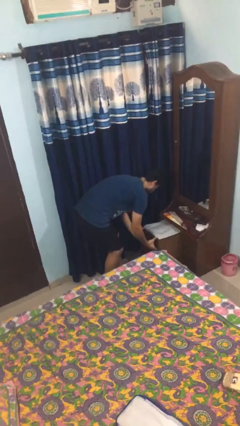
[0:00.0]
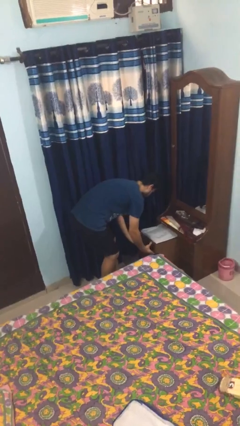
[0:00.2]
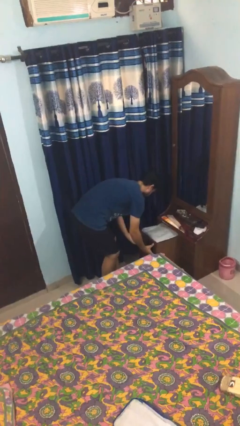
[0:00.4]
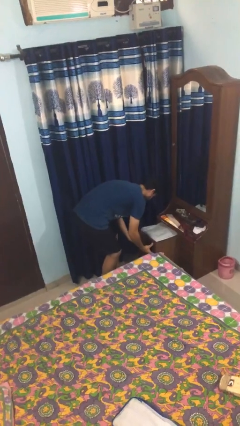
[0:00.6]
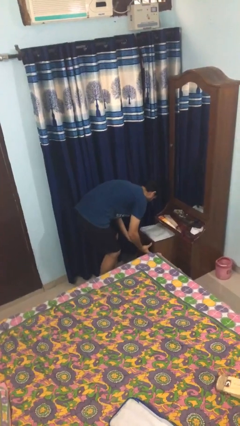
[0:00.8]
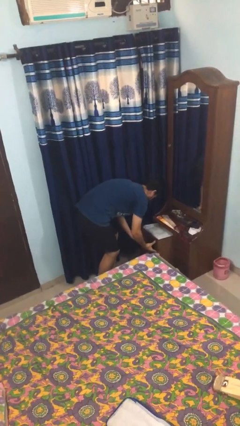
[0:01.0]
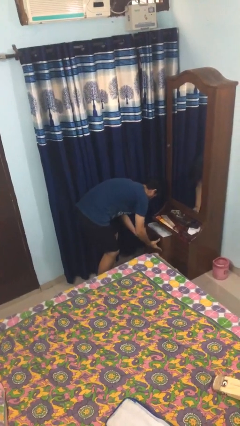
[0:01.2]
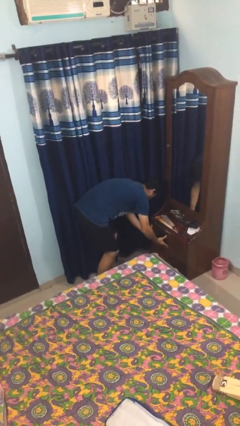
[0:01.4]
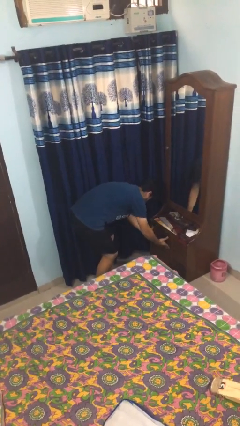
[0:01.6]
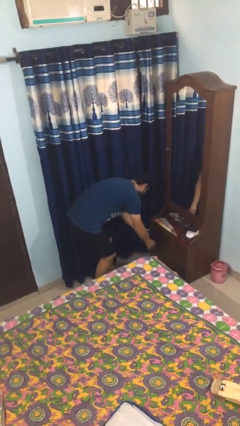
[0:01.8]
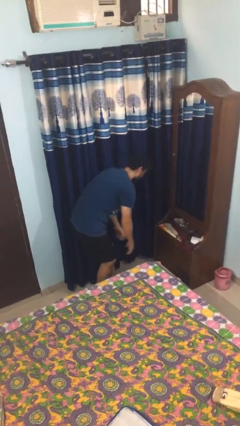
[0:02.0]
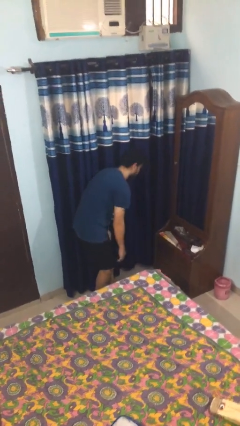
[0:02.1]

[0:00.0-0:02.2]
person closes dresser drawer

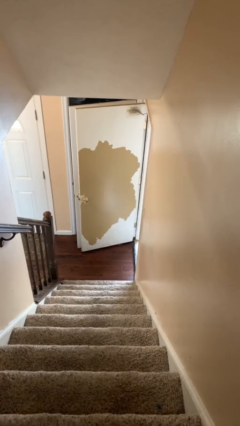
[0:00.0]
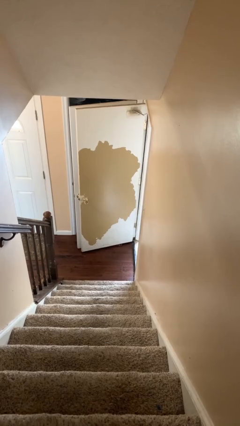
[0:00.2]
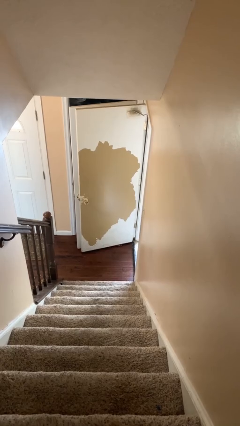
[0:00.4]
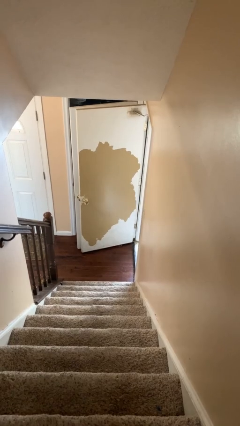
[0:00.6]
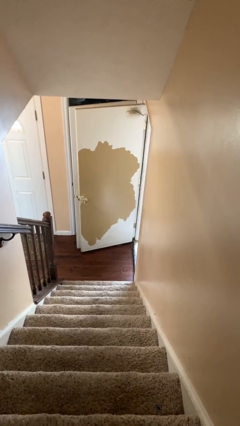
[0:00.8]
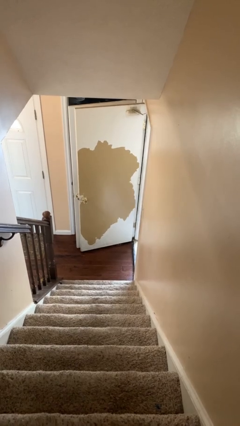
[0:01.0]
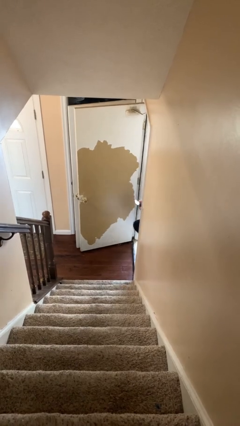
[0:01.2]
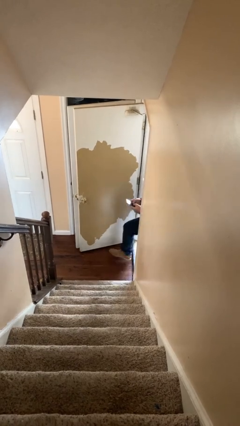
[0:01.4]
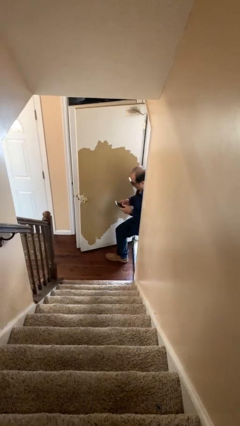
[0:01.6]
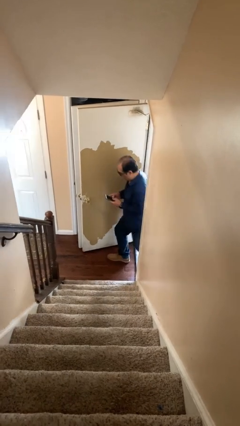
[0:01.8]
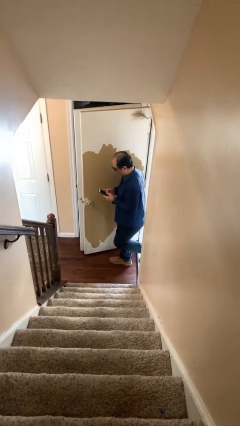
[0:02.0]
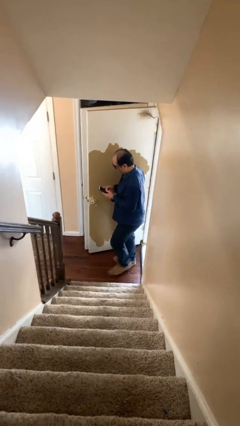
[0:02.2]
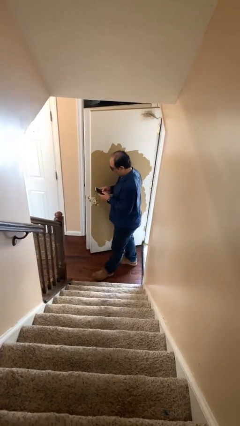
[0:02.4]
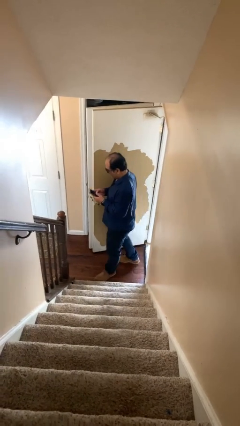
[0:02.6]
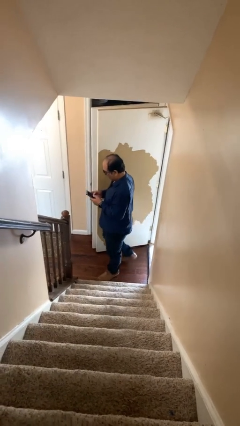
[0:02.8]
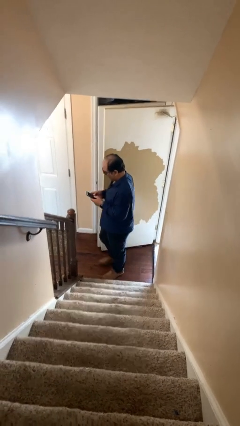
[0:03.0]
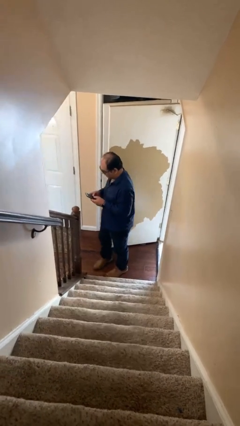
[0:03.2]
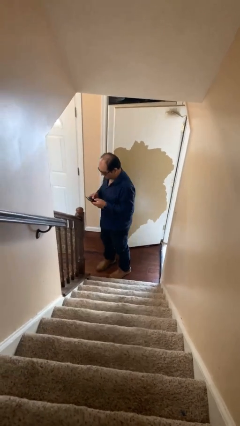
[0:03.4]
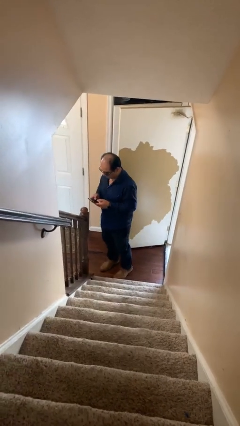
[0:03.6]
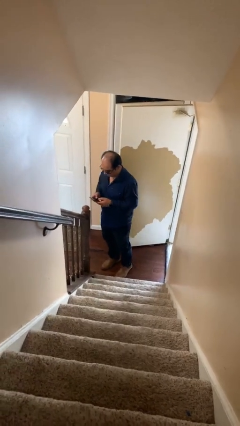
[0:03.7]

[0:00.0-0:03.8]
person enters scene through structure

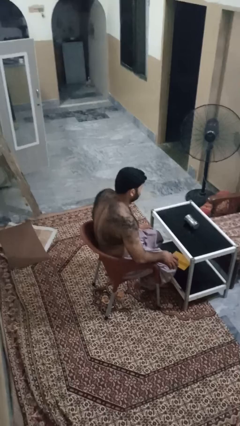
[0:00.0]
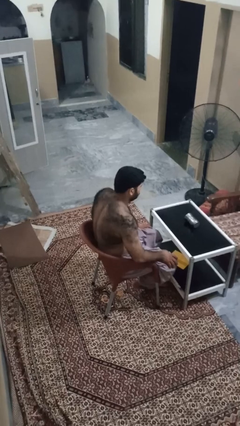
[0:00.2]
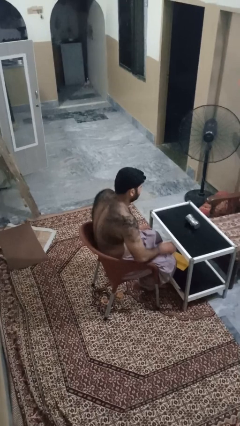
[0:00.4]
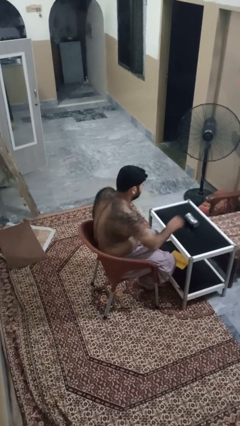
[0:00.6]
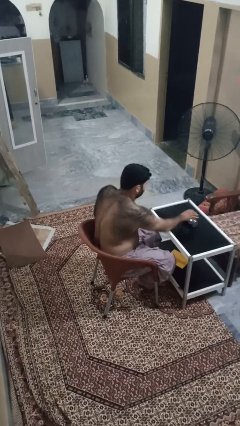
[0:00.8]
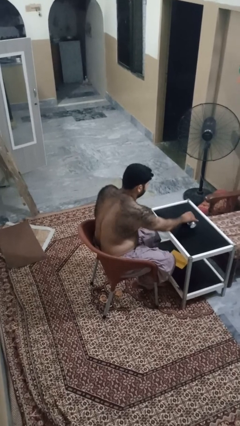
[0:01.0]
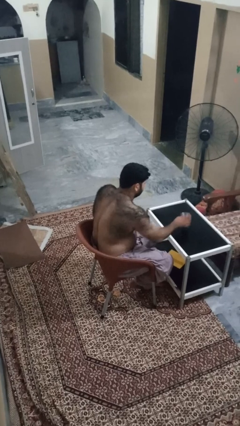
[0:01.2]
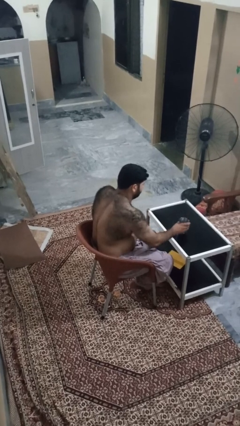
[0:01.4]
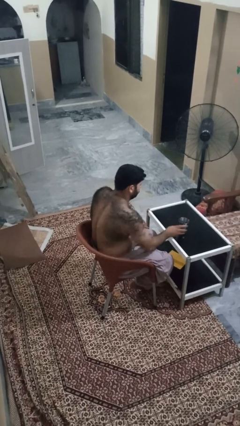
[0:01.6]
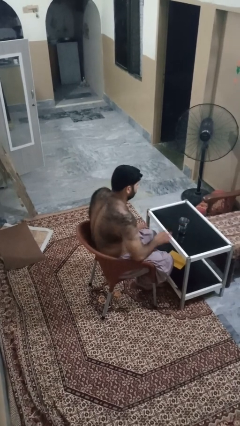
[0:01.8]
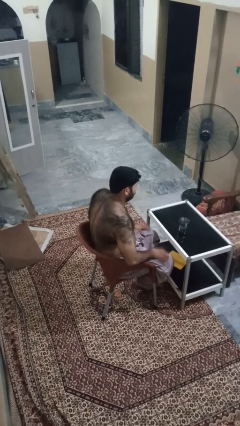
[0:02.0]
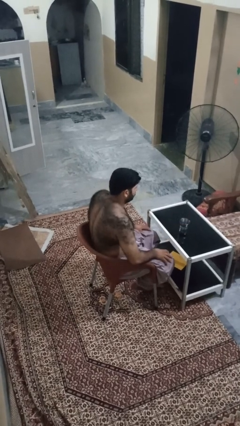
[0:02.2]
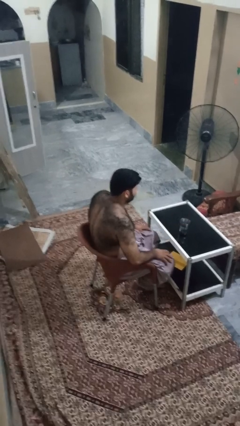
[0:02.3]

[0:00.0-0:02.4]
person sets upright glass

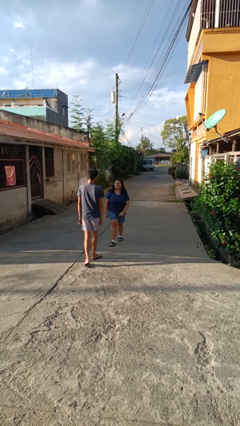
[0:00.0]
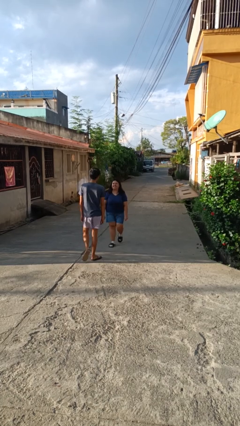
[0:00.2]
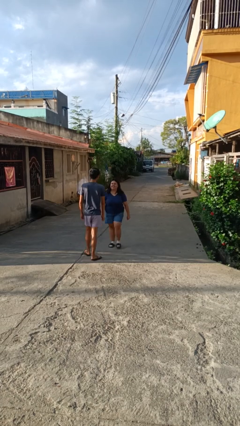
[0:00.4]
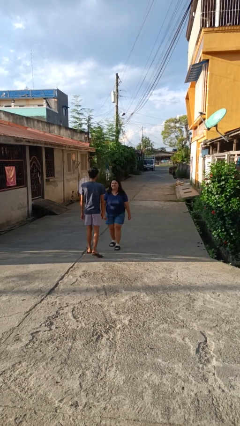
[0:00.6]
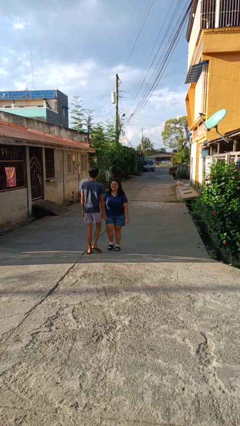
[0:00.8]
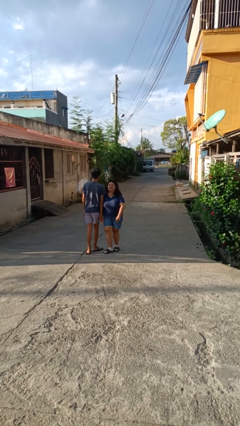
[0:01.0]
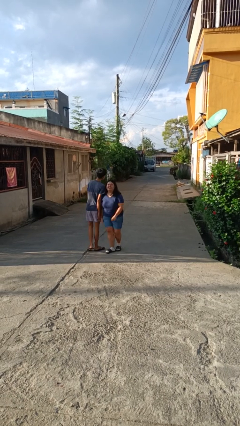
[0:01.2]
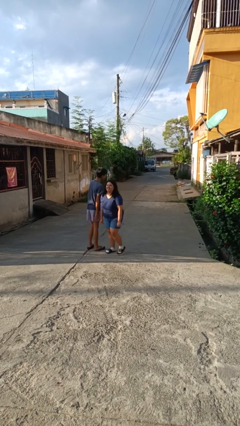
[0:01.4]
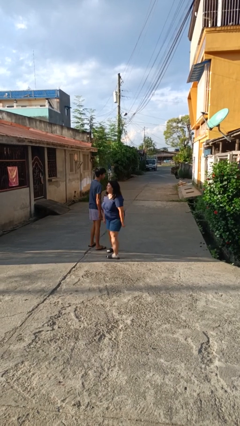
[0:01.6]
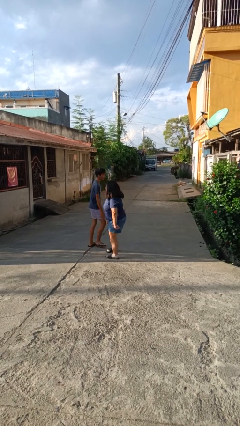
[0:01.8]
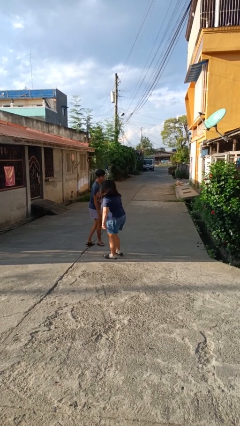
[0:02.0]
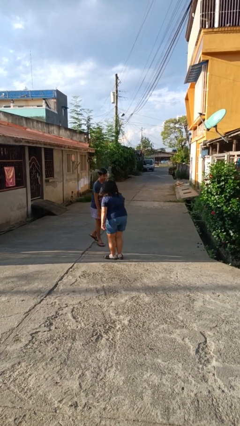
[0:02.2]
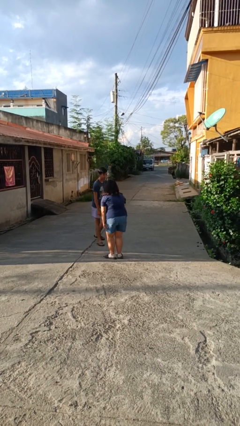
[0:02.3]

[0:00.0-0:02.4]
person bumps into person

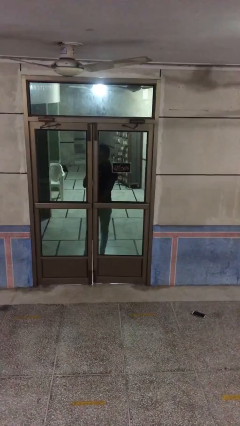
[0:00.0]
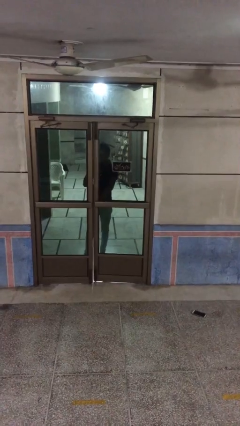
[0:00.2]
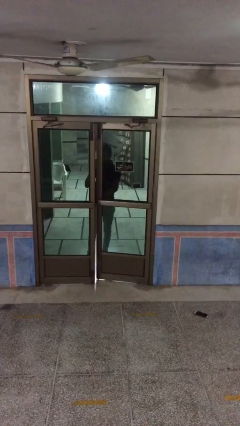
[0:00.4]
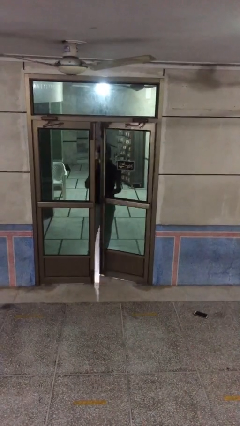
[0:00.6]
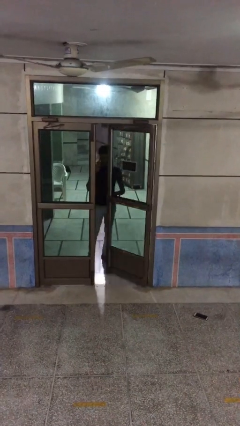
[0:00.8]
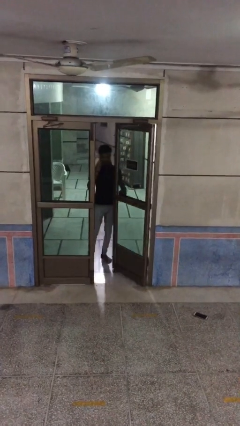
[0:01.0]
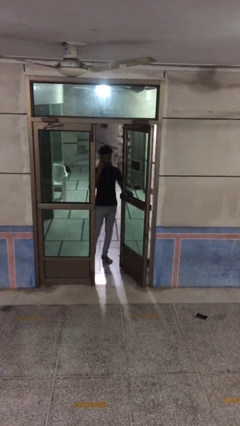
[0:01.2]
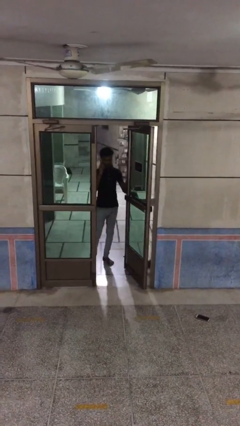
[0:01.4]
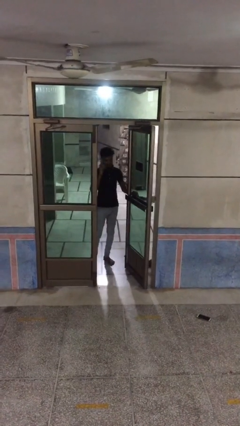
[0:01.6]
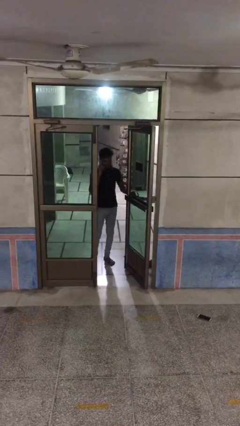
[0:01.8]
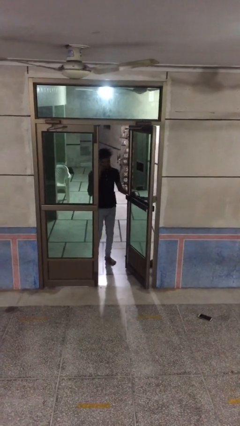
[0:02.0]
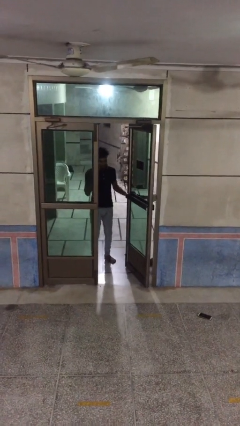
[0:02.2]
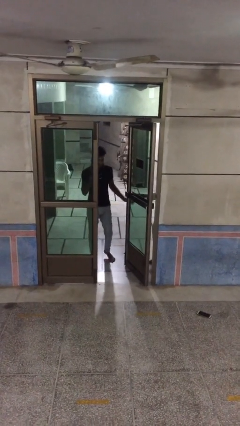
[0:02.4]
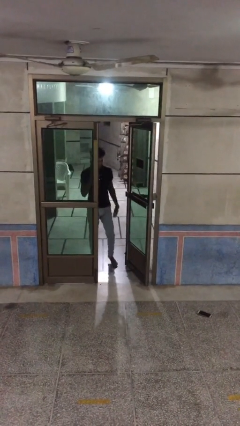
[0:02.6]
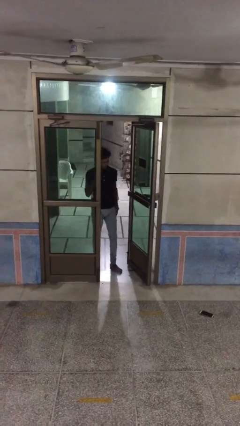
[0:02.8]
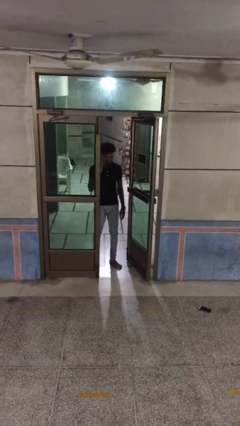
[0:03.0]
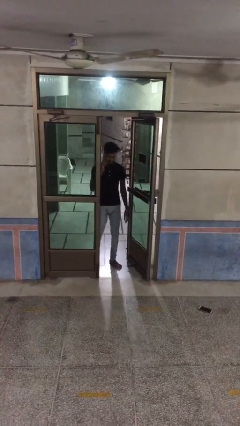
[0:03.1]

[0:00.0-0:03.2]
person opens facility door

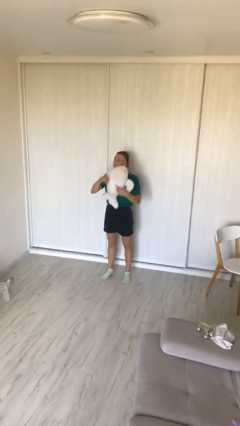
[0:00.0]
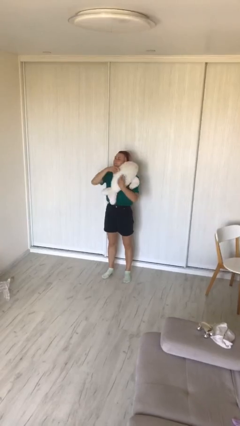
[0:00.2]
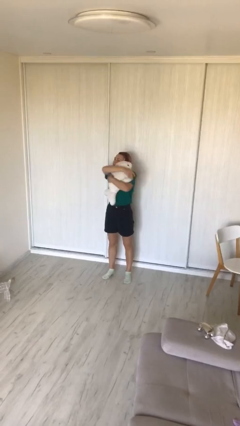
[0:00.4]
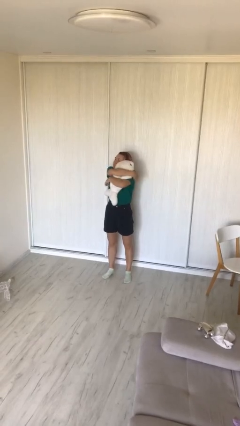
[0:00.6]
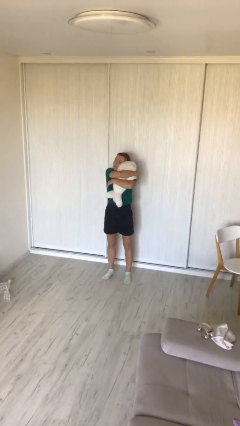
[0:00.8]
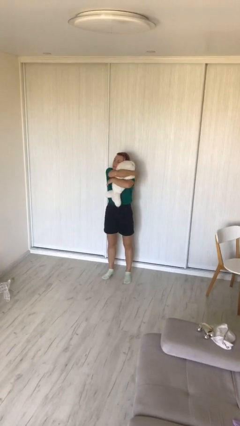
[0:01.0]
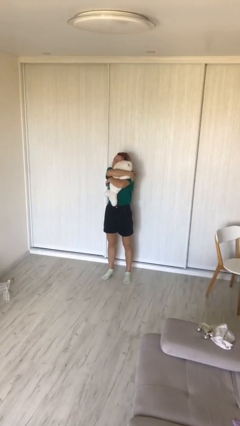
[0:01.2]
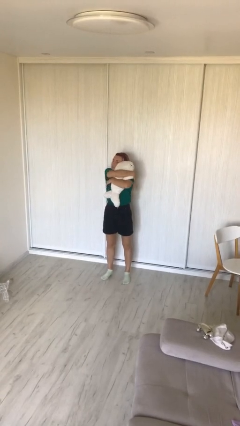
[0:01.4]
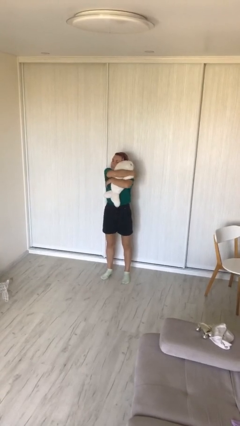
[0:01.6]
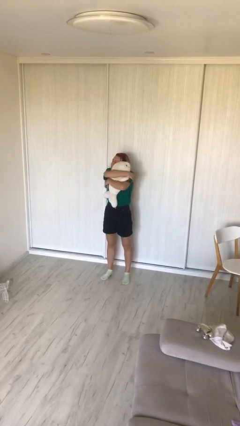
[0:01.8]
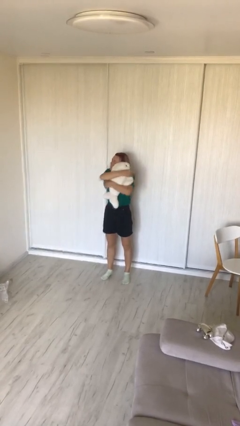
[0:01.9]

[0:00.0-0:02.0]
person hugs stuffed animal

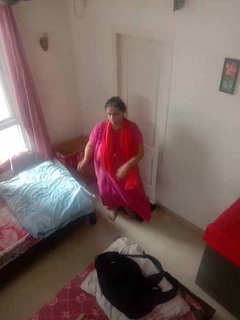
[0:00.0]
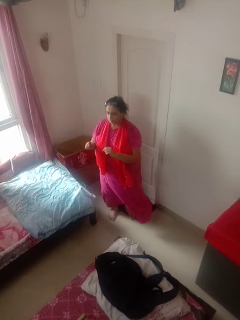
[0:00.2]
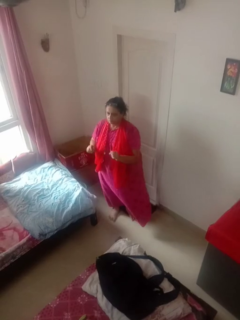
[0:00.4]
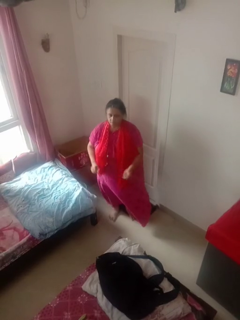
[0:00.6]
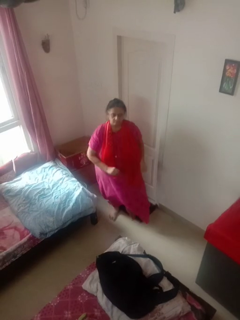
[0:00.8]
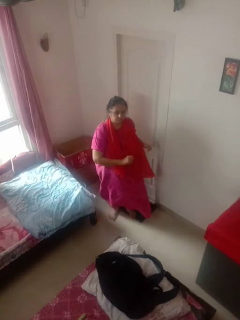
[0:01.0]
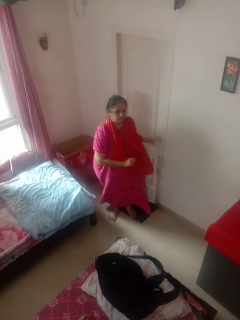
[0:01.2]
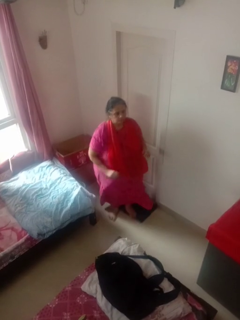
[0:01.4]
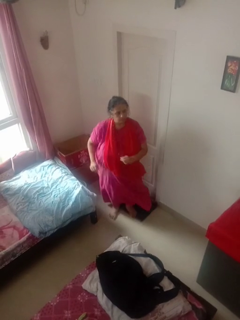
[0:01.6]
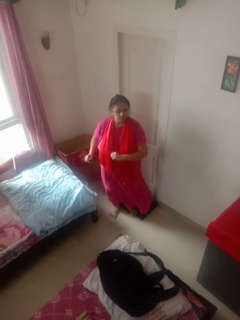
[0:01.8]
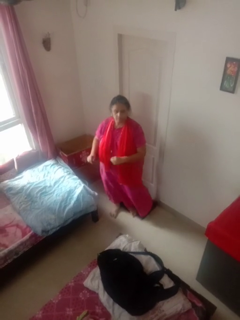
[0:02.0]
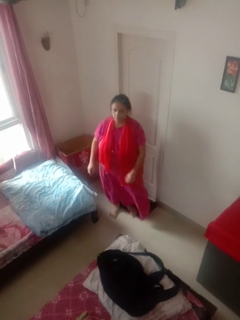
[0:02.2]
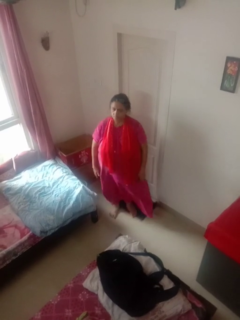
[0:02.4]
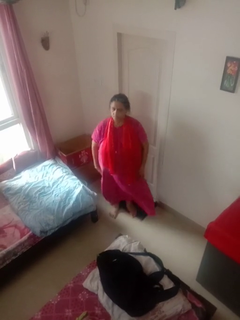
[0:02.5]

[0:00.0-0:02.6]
person dances in place
